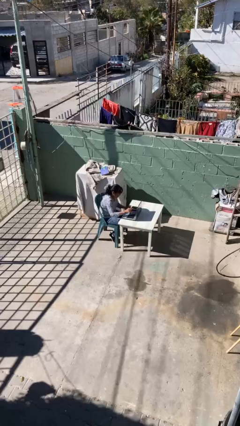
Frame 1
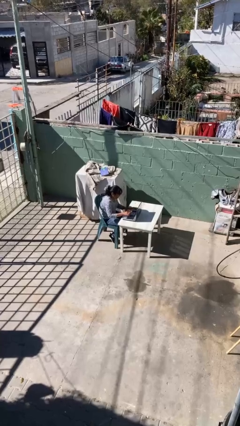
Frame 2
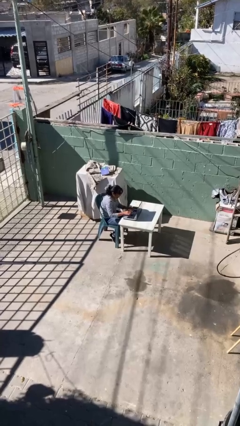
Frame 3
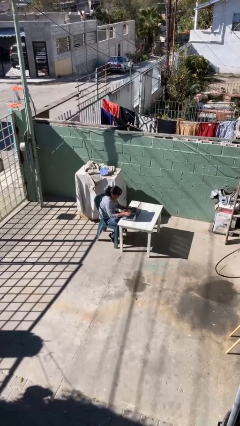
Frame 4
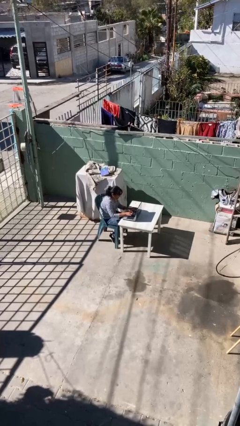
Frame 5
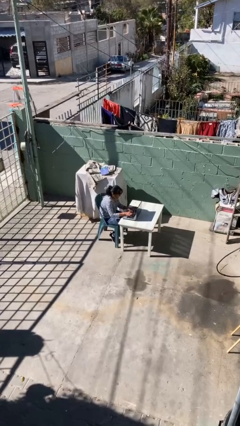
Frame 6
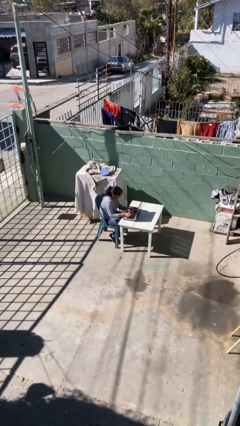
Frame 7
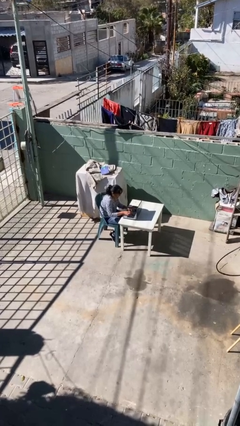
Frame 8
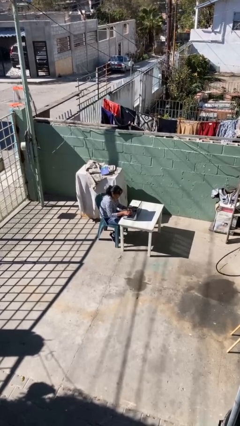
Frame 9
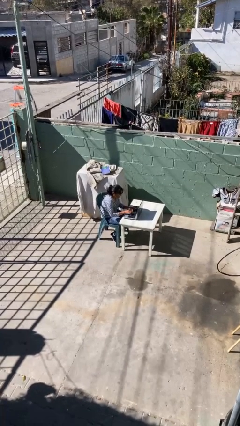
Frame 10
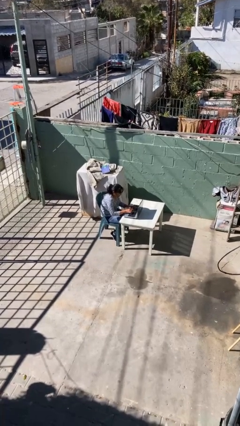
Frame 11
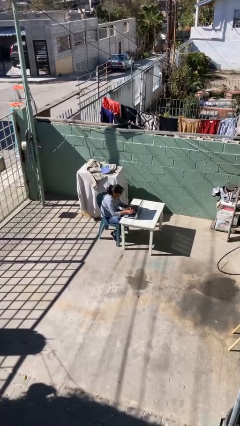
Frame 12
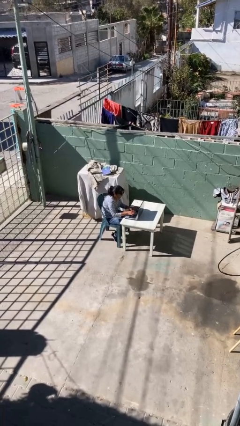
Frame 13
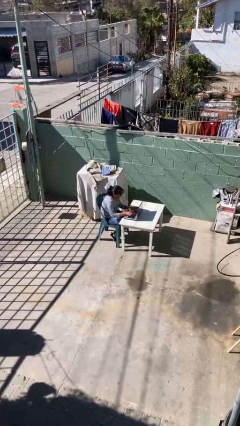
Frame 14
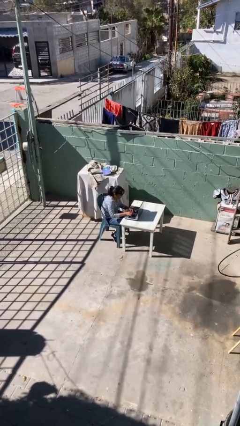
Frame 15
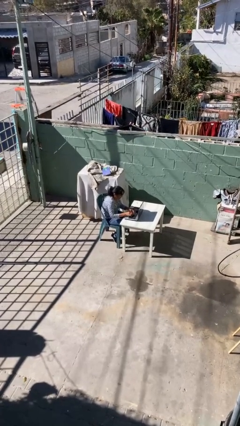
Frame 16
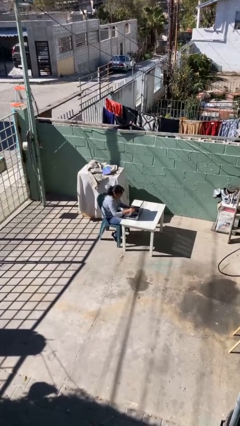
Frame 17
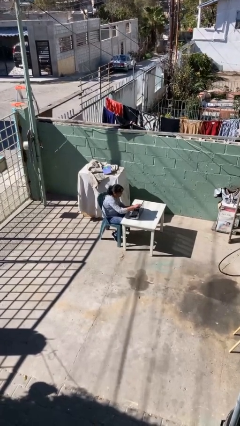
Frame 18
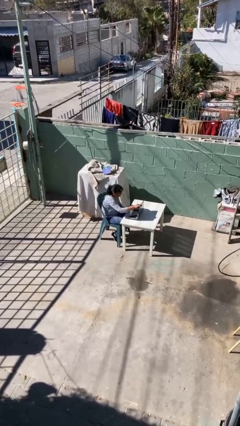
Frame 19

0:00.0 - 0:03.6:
person interacts with laptop

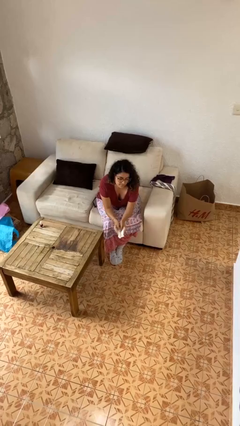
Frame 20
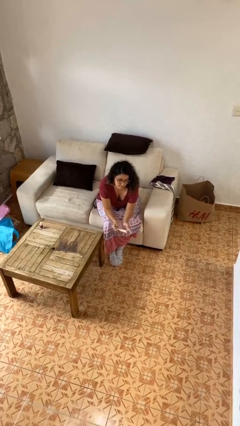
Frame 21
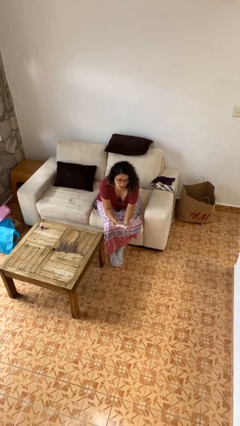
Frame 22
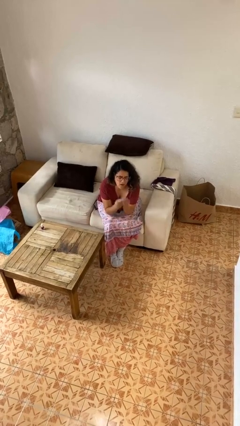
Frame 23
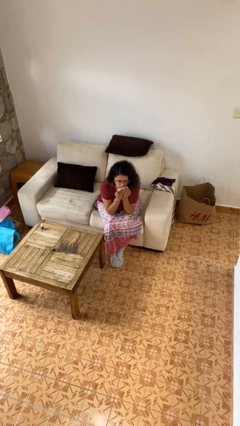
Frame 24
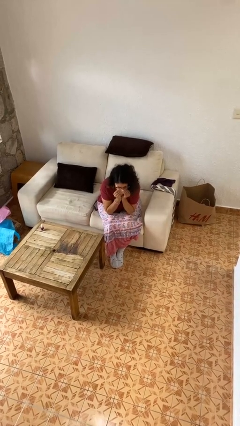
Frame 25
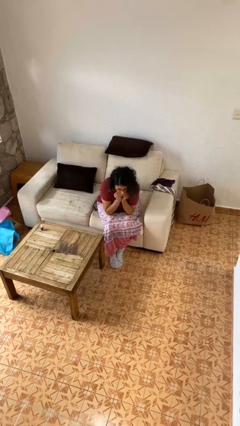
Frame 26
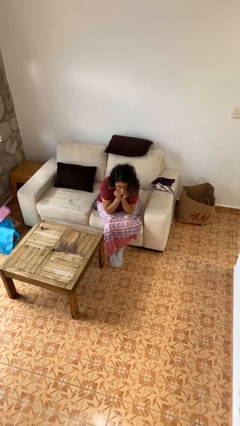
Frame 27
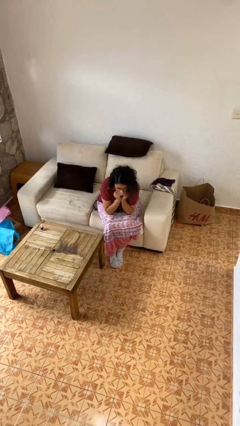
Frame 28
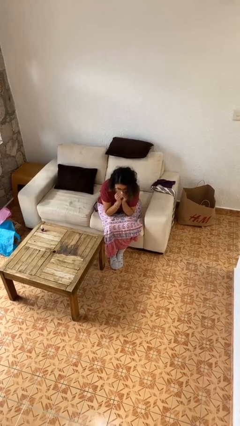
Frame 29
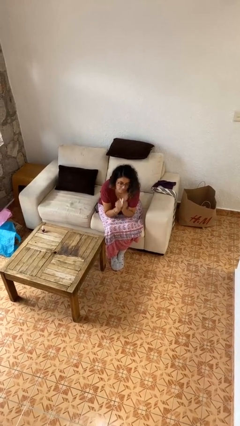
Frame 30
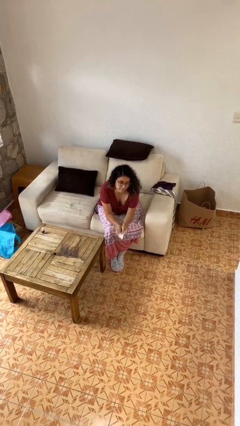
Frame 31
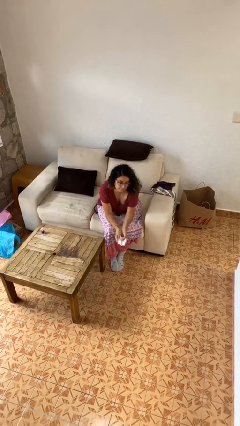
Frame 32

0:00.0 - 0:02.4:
person blows nose

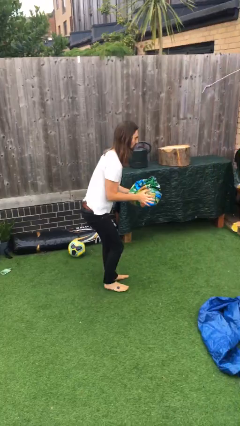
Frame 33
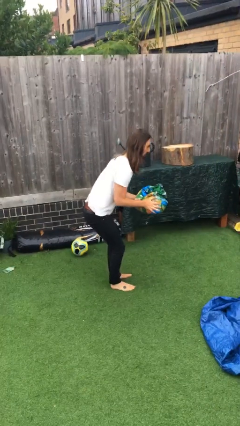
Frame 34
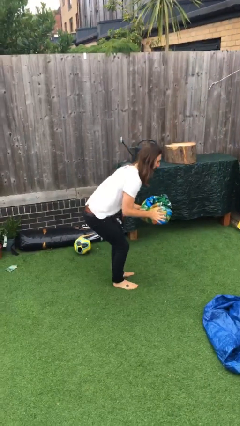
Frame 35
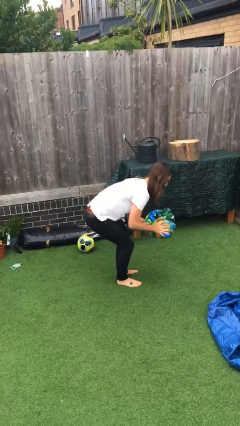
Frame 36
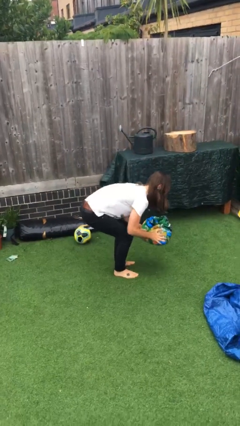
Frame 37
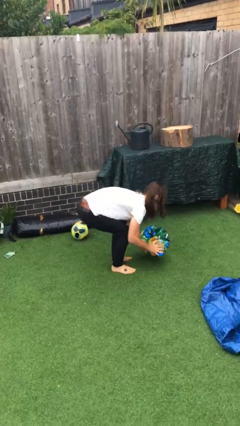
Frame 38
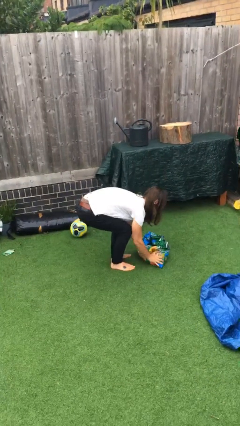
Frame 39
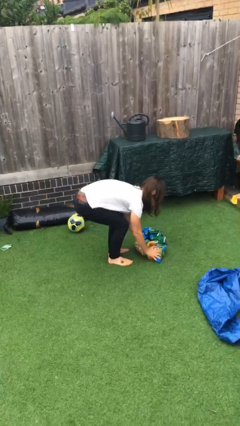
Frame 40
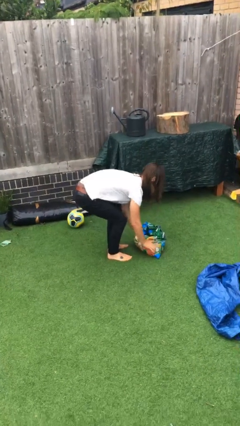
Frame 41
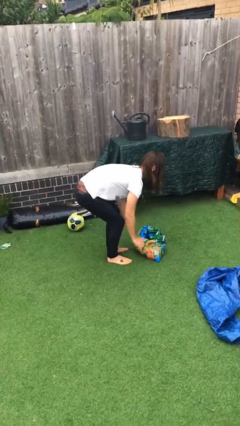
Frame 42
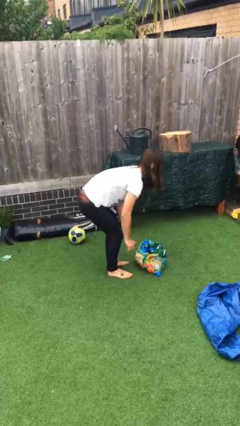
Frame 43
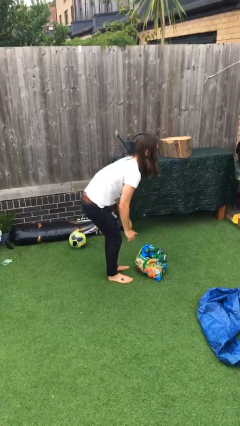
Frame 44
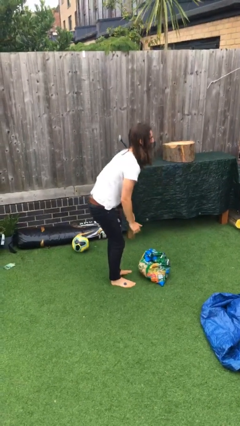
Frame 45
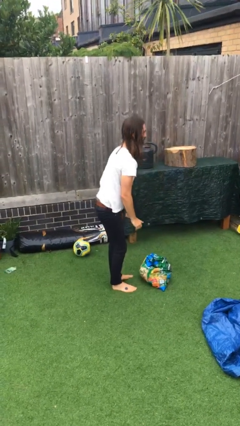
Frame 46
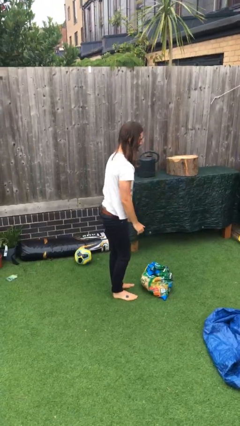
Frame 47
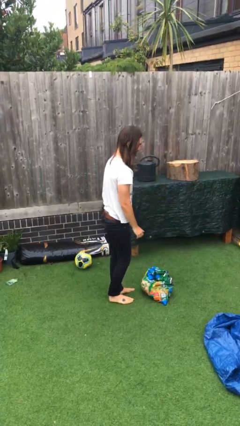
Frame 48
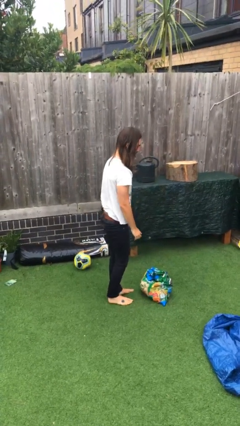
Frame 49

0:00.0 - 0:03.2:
person puts down object on floor

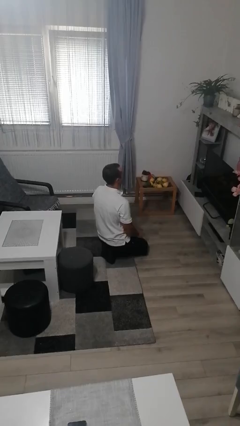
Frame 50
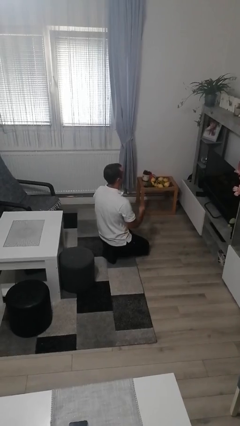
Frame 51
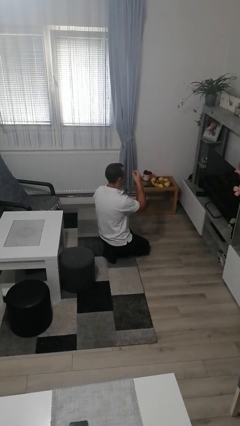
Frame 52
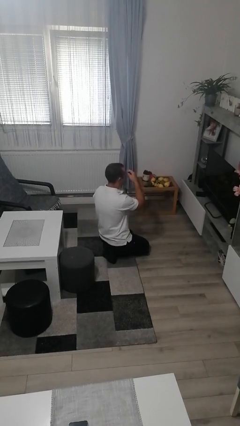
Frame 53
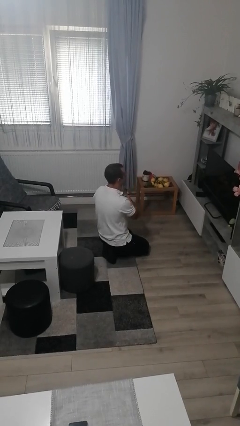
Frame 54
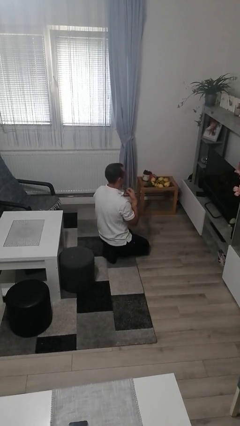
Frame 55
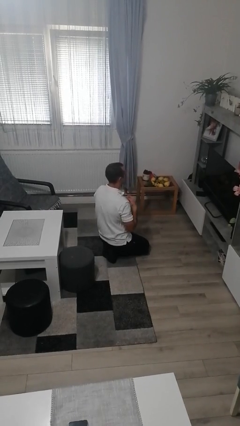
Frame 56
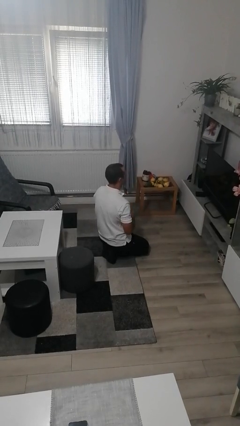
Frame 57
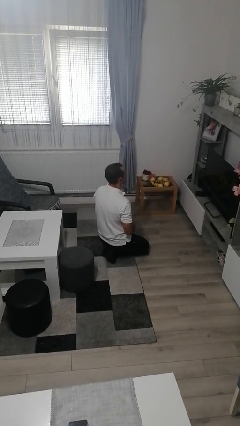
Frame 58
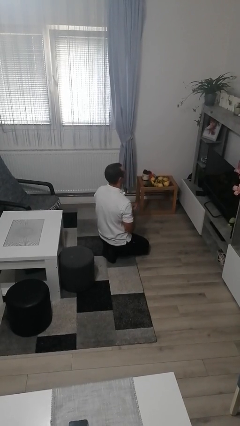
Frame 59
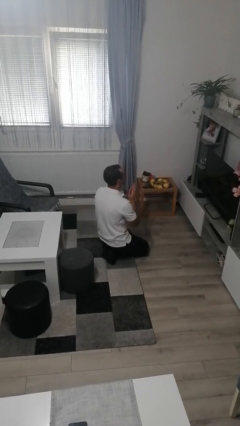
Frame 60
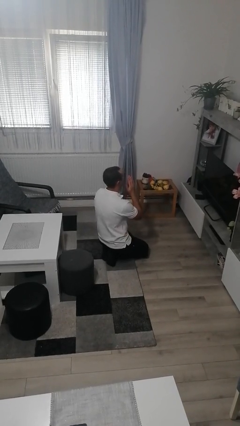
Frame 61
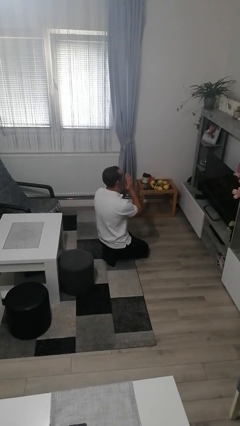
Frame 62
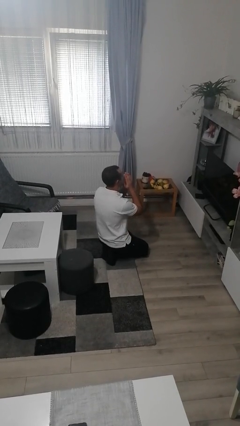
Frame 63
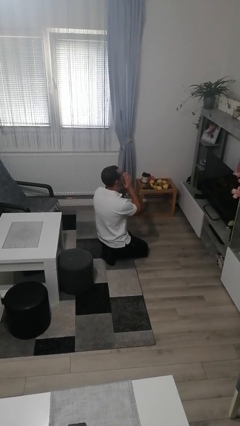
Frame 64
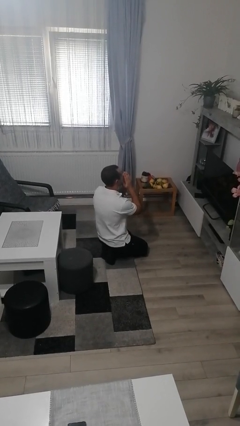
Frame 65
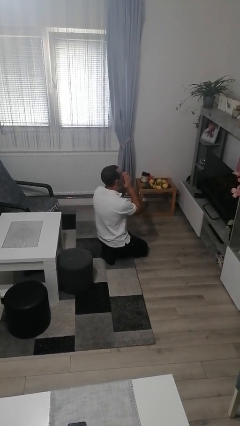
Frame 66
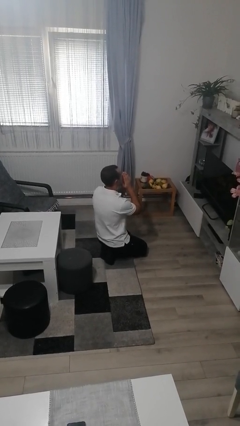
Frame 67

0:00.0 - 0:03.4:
person prays

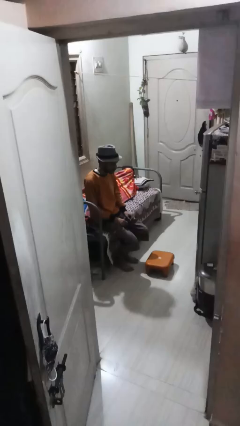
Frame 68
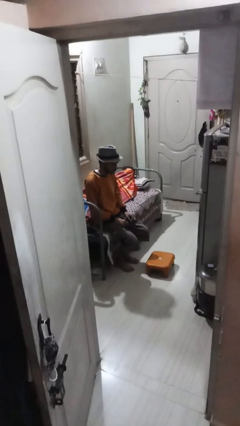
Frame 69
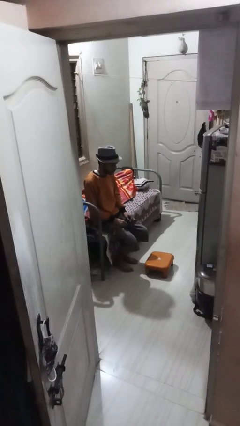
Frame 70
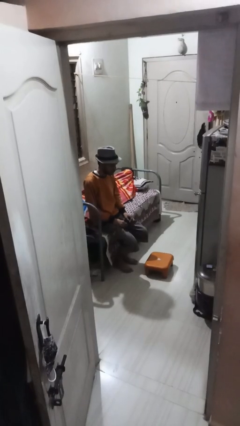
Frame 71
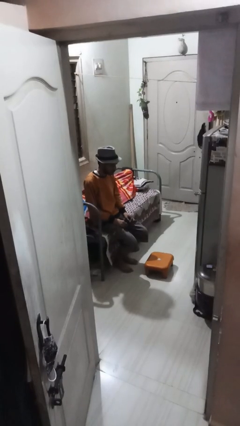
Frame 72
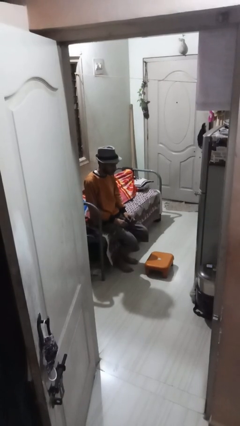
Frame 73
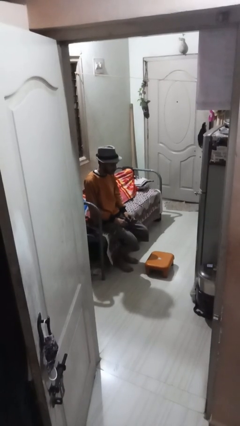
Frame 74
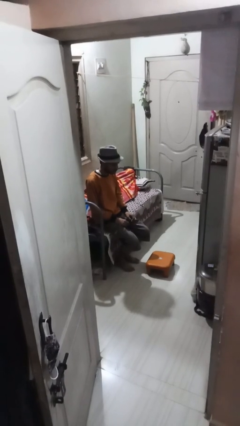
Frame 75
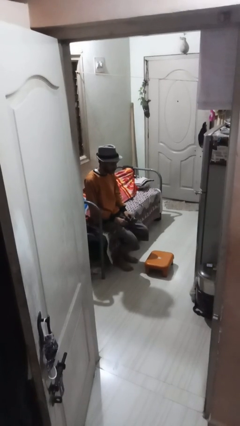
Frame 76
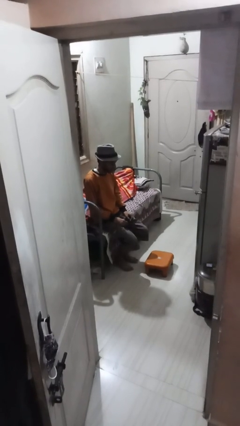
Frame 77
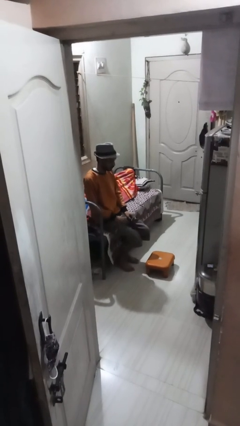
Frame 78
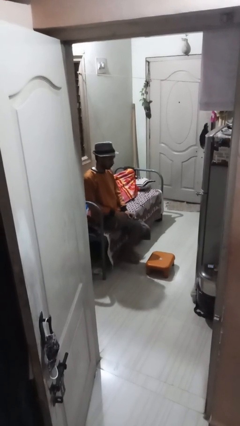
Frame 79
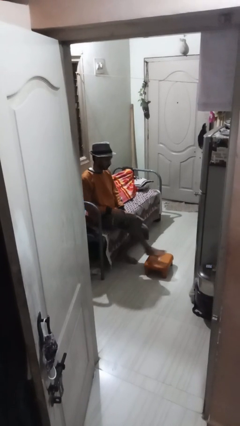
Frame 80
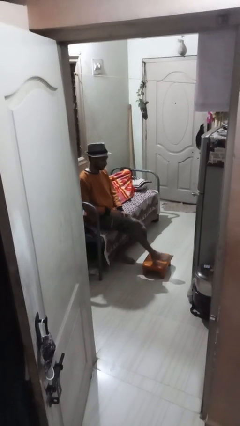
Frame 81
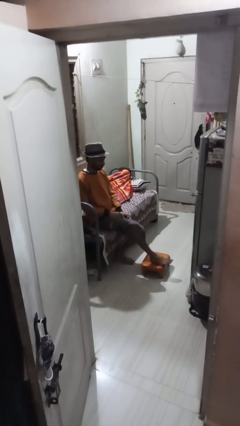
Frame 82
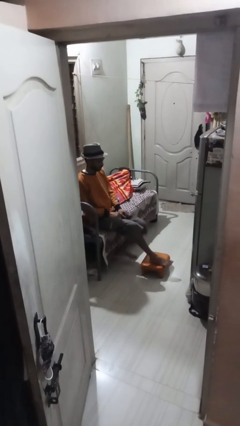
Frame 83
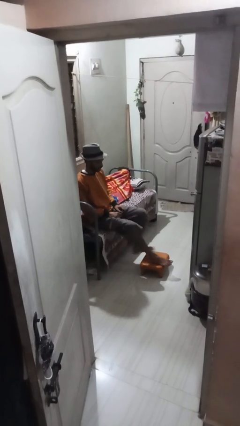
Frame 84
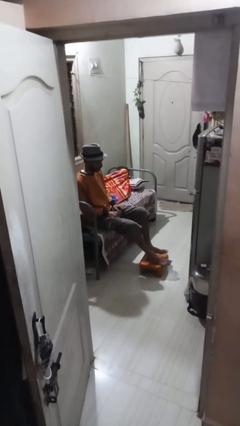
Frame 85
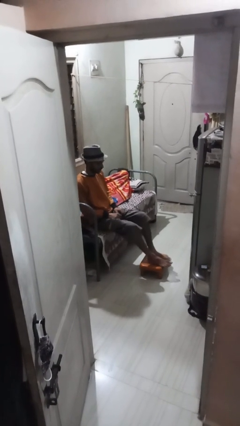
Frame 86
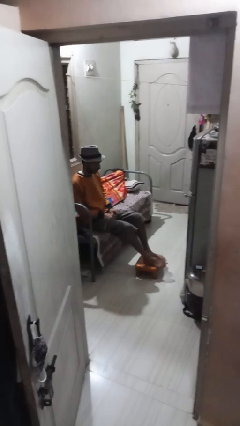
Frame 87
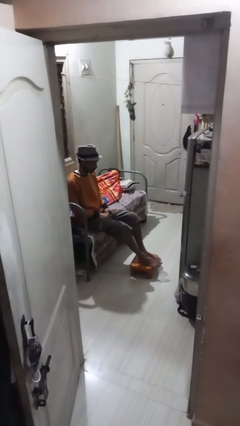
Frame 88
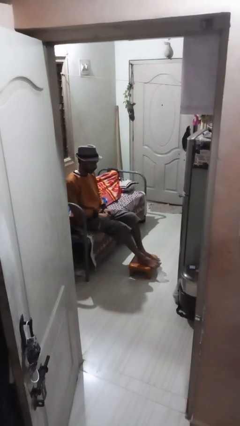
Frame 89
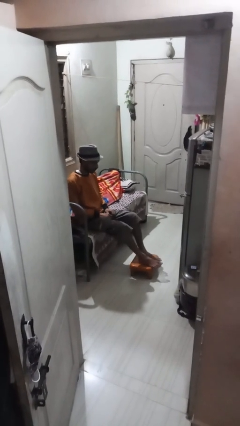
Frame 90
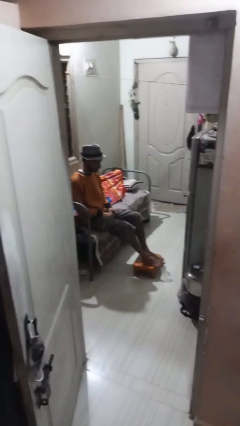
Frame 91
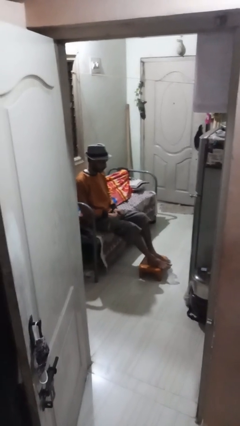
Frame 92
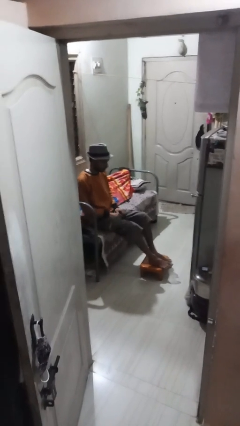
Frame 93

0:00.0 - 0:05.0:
person puts feet up

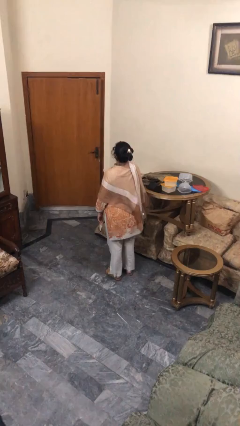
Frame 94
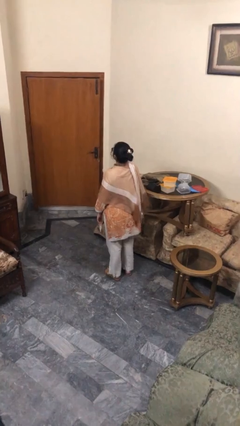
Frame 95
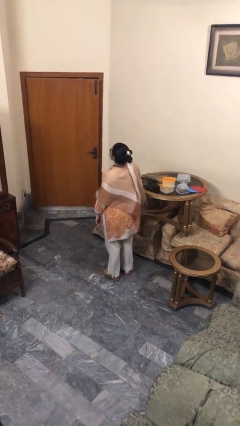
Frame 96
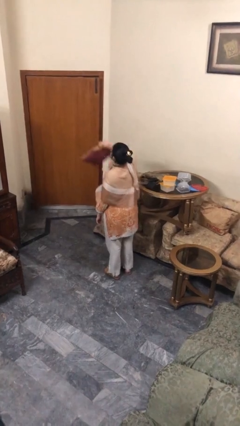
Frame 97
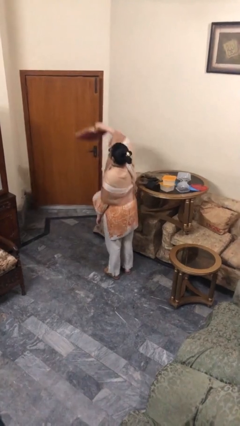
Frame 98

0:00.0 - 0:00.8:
person drops object
